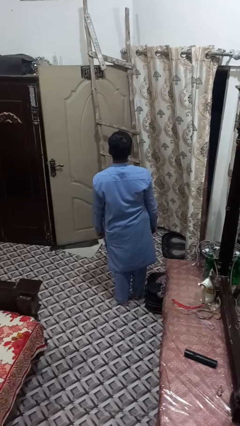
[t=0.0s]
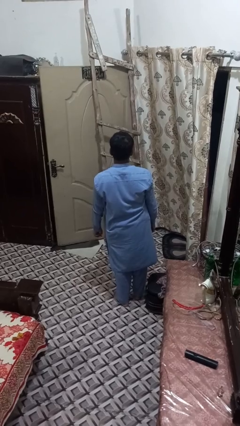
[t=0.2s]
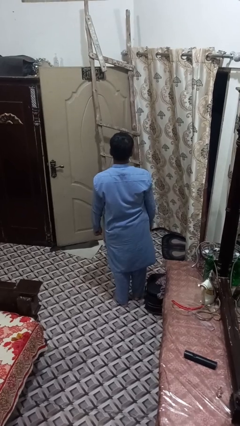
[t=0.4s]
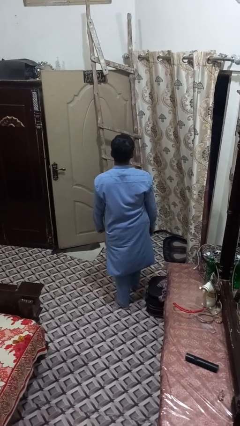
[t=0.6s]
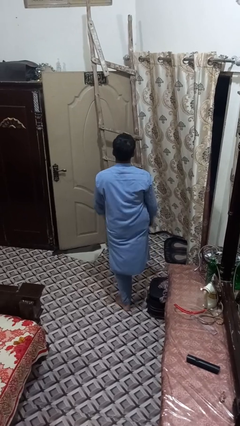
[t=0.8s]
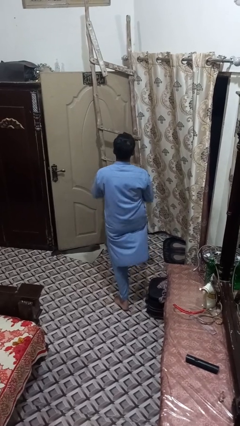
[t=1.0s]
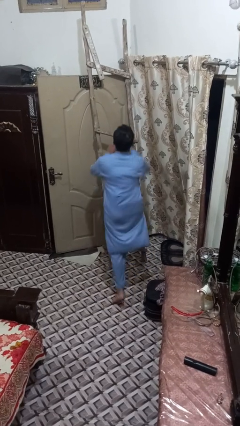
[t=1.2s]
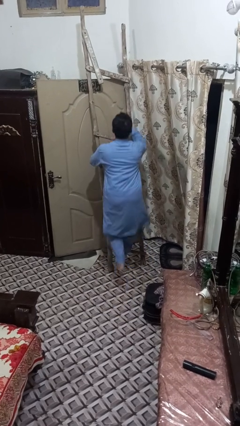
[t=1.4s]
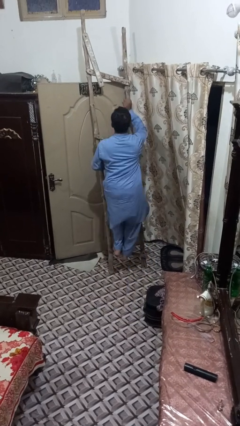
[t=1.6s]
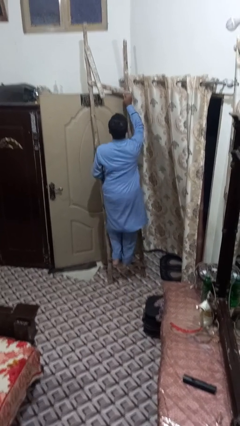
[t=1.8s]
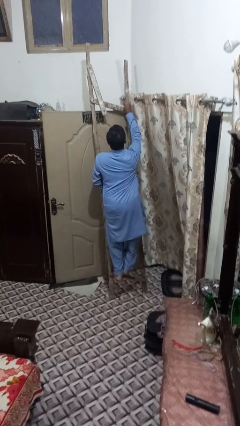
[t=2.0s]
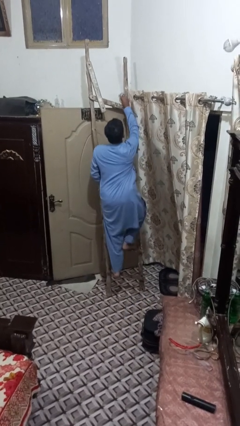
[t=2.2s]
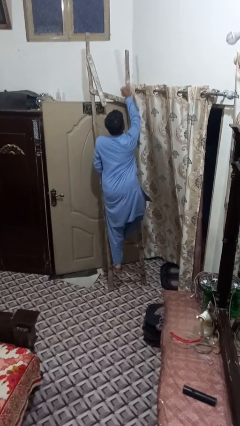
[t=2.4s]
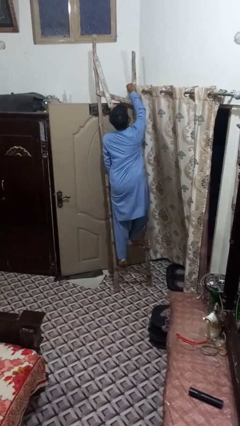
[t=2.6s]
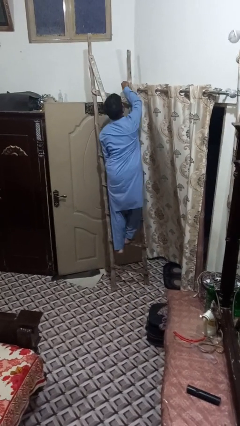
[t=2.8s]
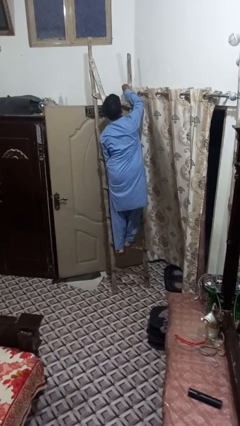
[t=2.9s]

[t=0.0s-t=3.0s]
person climbs up ladder

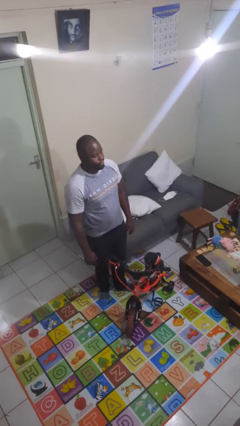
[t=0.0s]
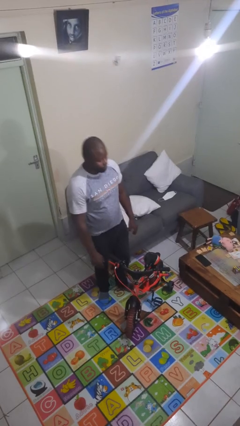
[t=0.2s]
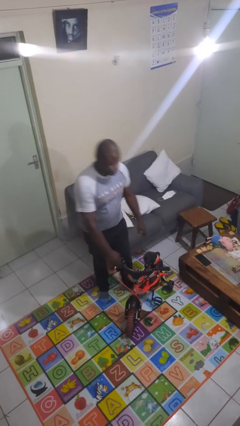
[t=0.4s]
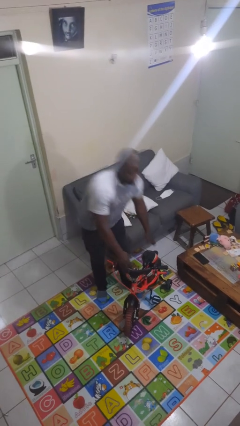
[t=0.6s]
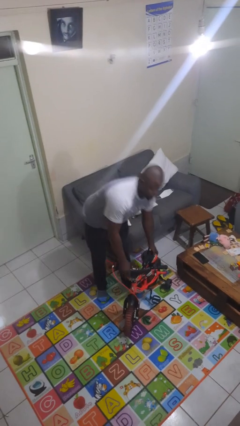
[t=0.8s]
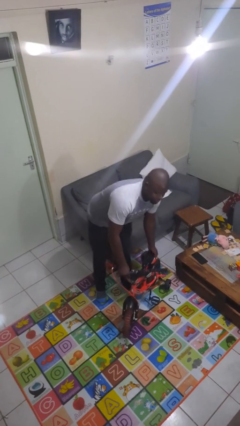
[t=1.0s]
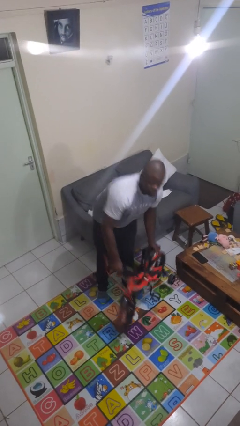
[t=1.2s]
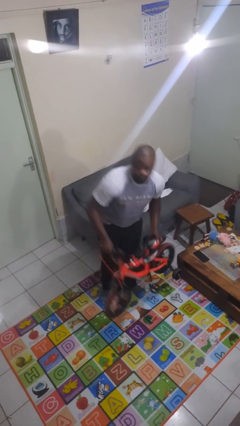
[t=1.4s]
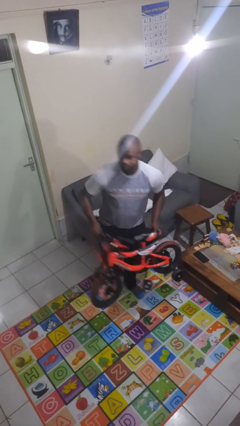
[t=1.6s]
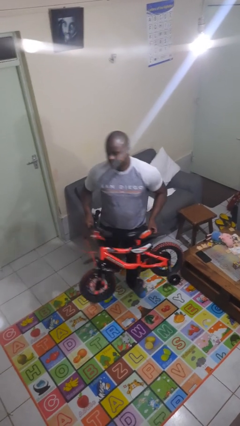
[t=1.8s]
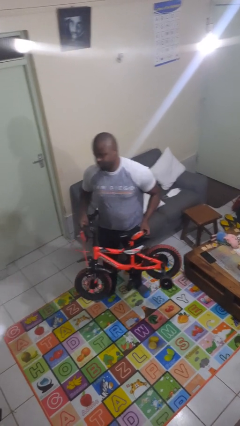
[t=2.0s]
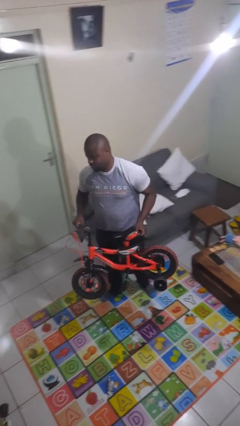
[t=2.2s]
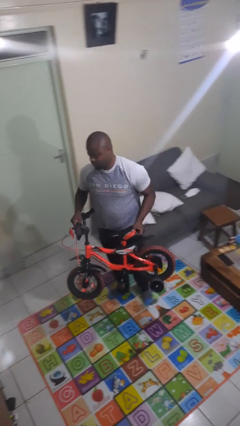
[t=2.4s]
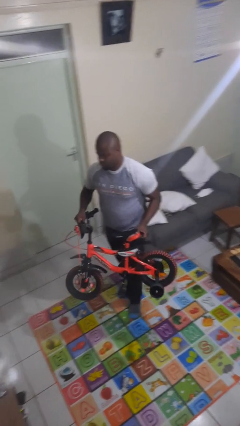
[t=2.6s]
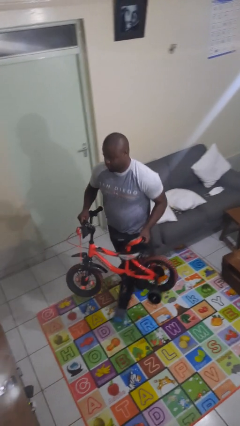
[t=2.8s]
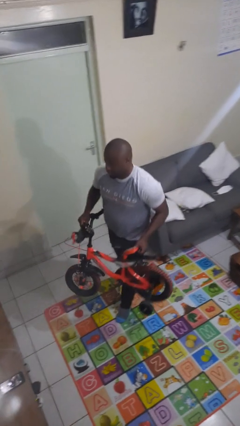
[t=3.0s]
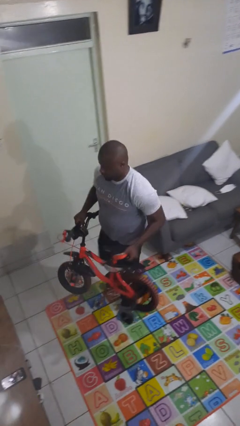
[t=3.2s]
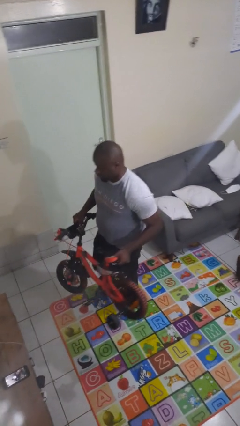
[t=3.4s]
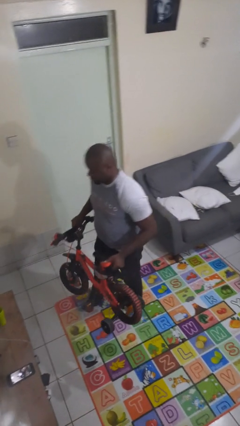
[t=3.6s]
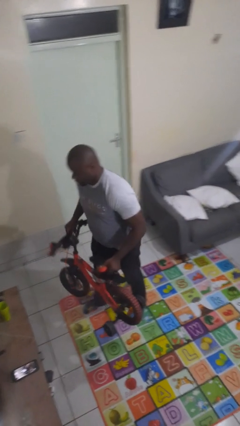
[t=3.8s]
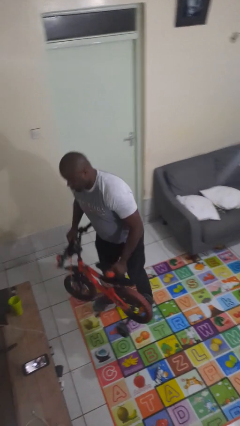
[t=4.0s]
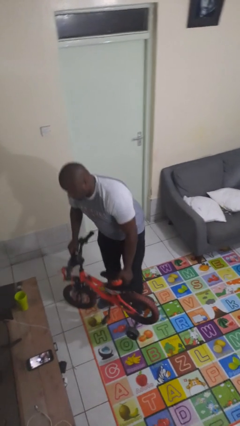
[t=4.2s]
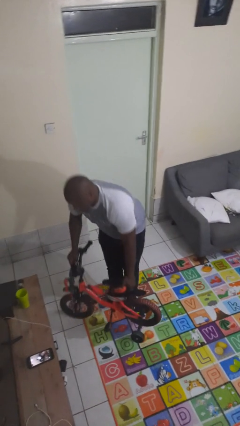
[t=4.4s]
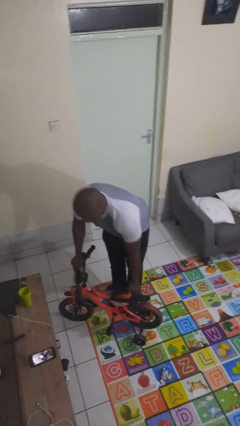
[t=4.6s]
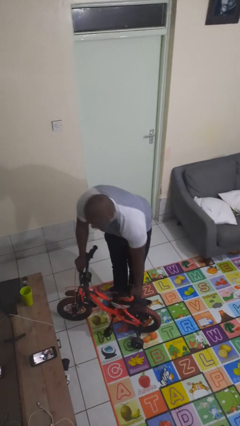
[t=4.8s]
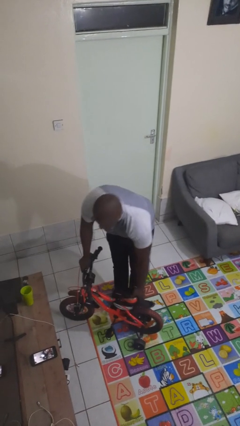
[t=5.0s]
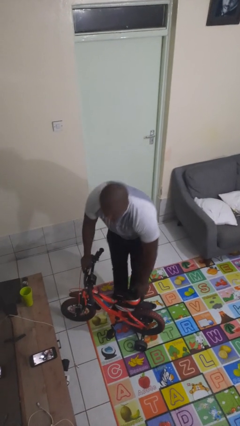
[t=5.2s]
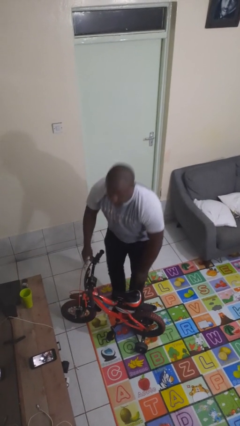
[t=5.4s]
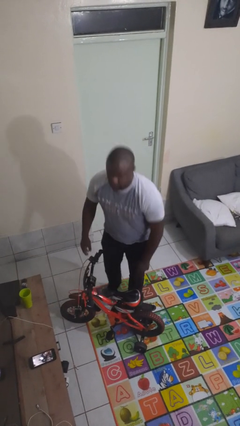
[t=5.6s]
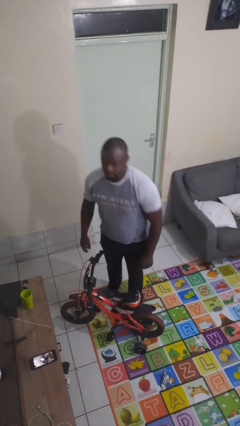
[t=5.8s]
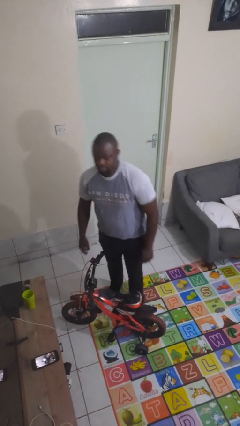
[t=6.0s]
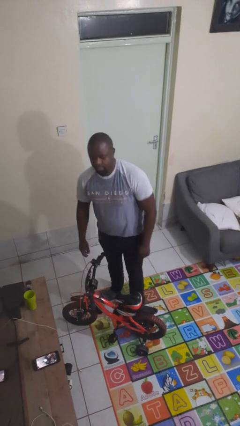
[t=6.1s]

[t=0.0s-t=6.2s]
person carries bicycle

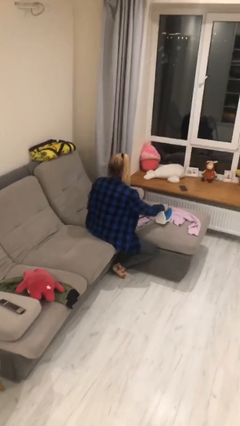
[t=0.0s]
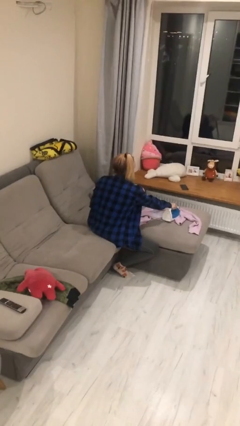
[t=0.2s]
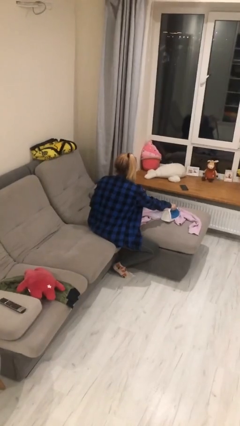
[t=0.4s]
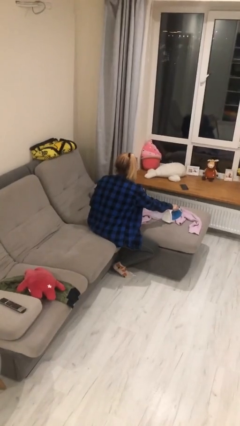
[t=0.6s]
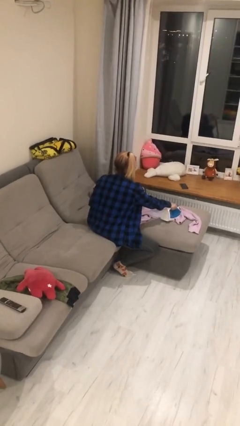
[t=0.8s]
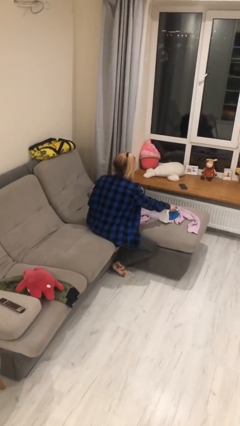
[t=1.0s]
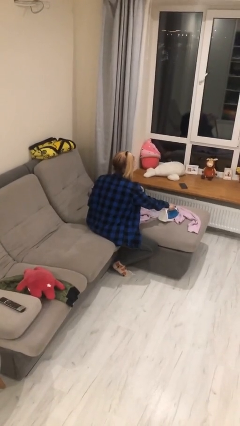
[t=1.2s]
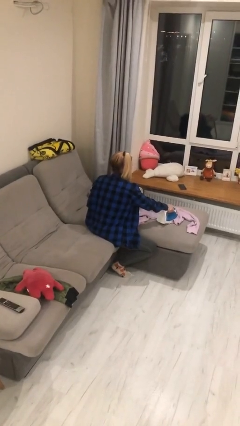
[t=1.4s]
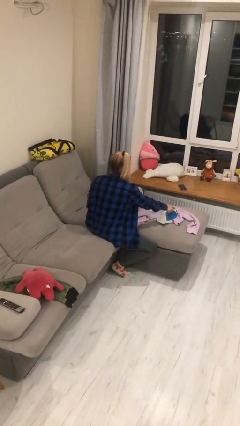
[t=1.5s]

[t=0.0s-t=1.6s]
person irons clothes

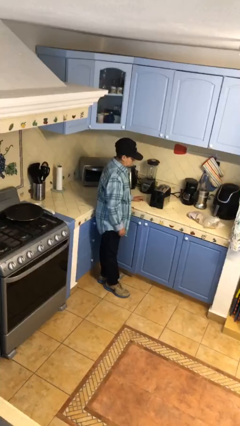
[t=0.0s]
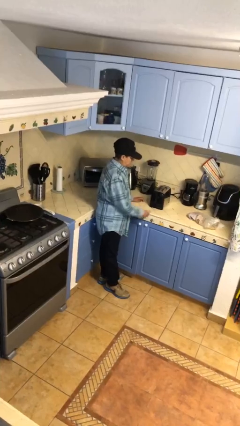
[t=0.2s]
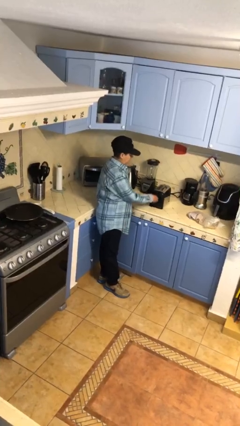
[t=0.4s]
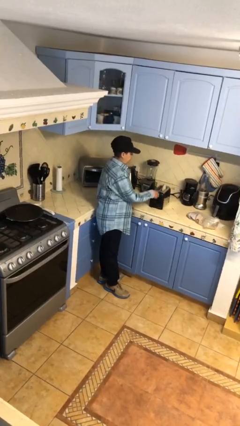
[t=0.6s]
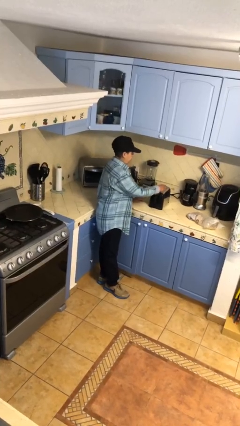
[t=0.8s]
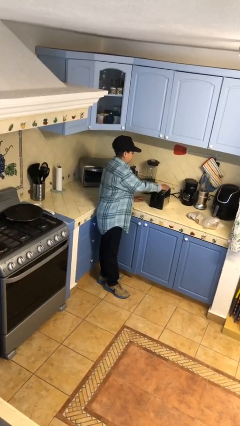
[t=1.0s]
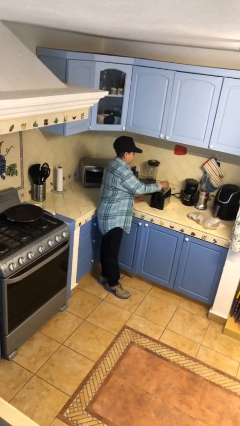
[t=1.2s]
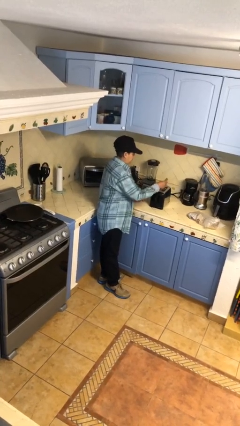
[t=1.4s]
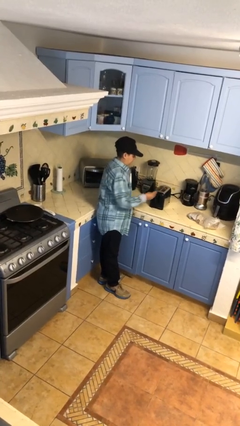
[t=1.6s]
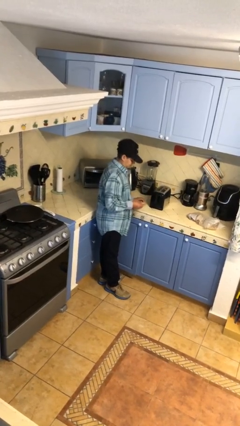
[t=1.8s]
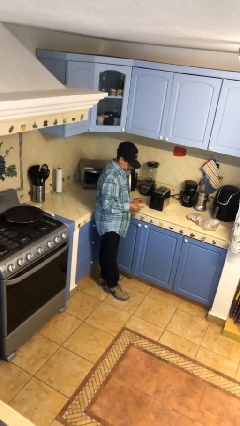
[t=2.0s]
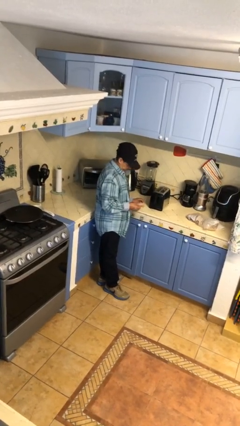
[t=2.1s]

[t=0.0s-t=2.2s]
person takes object from toaster

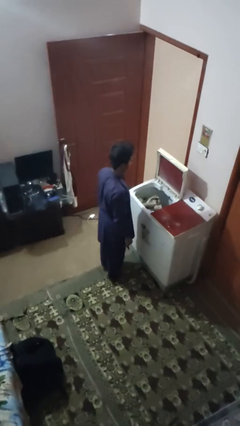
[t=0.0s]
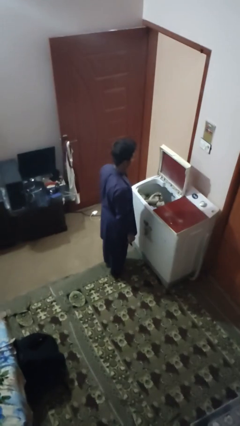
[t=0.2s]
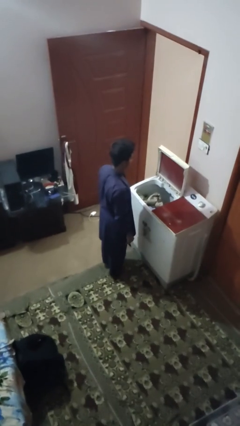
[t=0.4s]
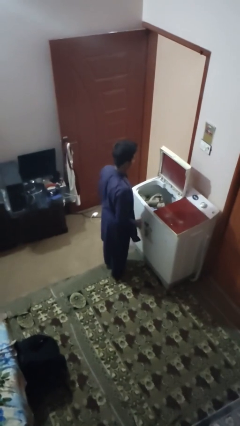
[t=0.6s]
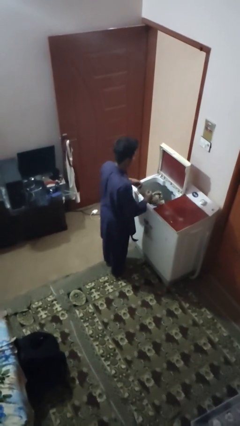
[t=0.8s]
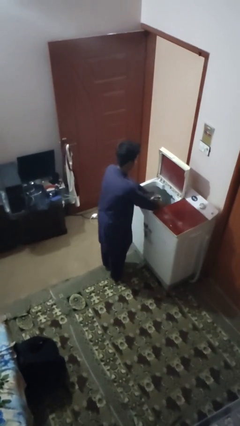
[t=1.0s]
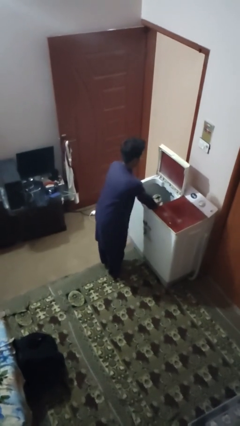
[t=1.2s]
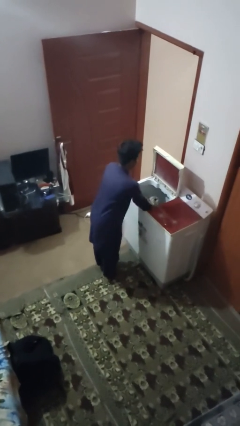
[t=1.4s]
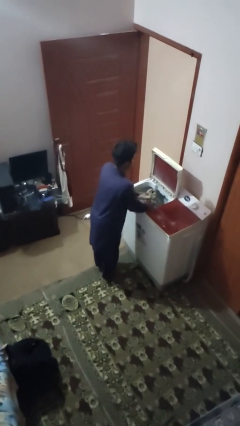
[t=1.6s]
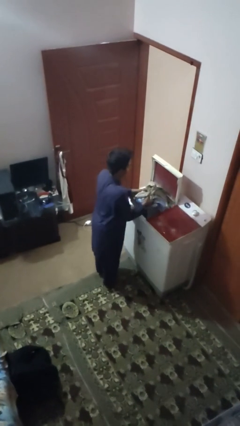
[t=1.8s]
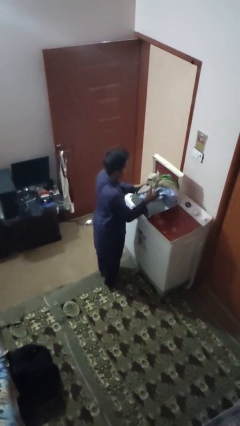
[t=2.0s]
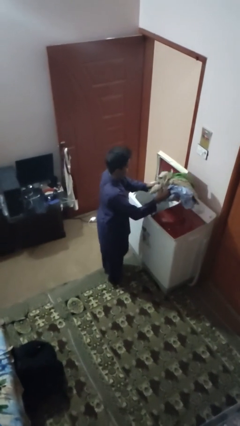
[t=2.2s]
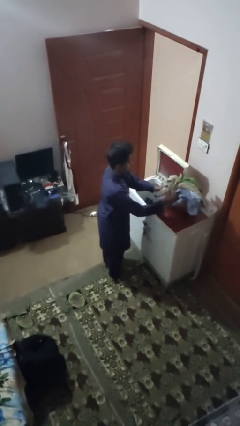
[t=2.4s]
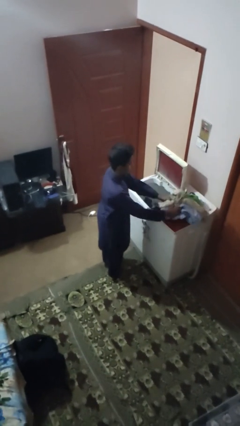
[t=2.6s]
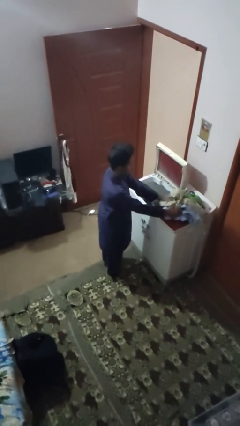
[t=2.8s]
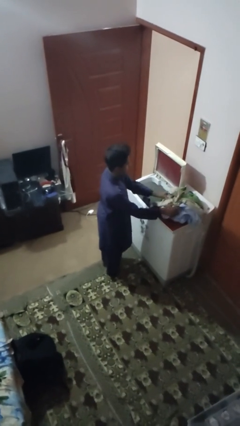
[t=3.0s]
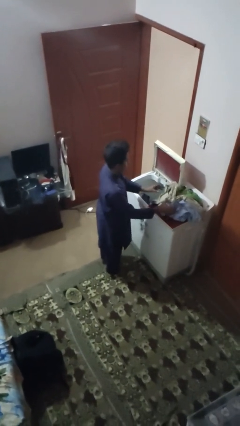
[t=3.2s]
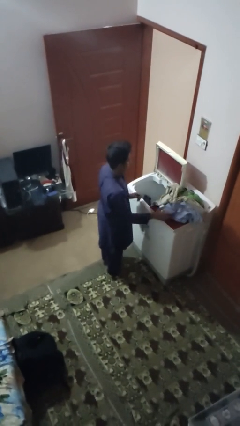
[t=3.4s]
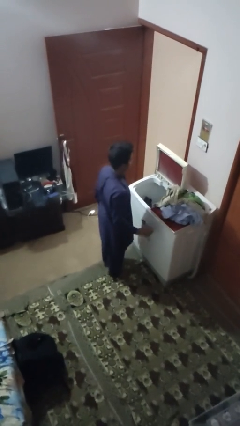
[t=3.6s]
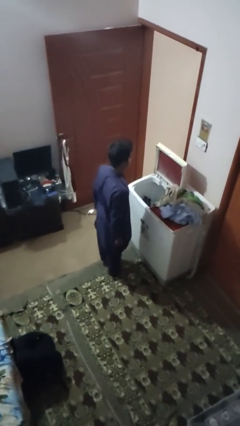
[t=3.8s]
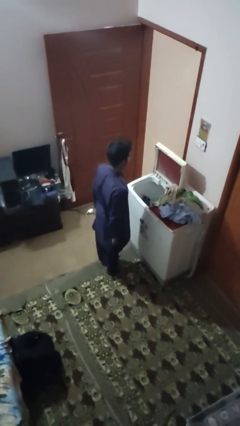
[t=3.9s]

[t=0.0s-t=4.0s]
person unloads clotheswasher

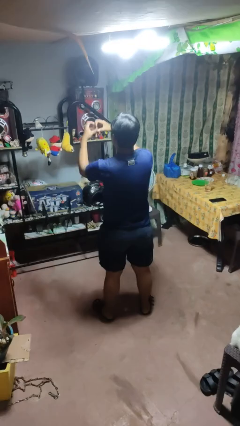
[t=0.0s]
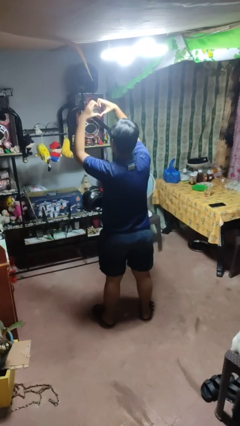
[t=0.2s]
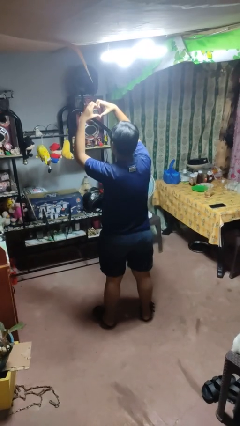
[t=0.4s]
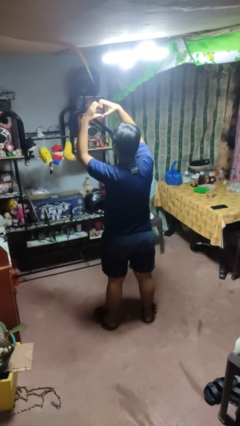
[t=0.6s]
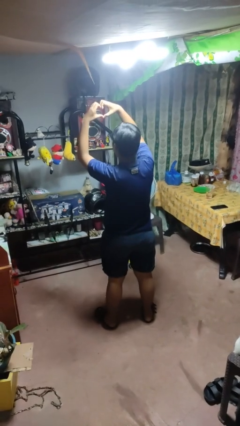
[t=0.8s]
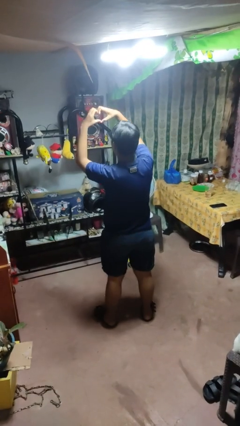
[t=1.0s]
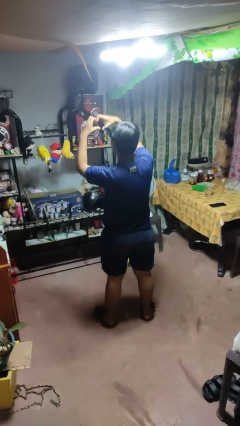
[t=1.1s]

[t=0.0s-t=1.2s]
person gestures heart
